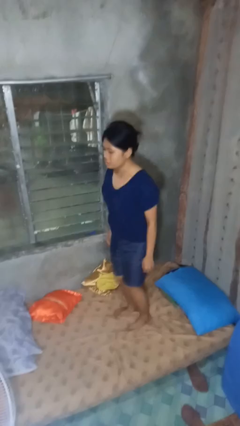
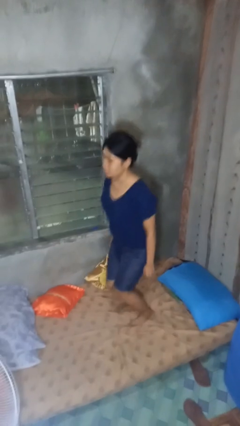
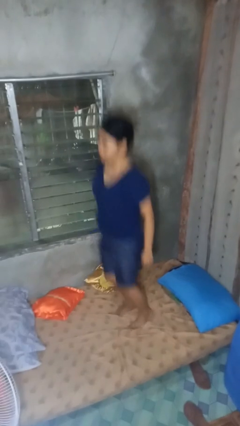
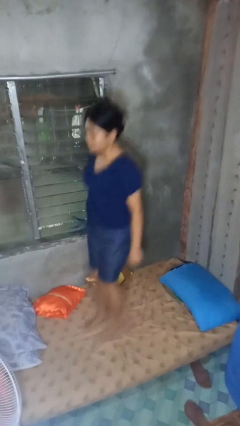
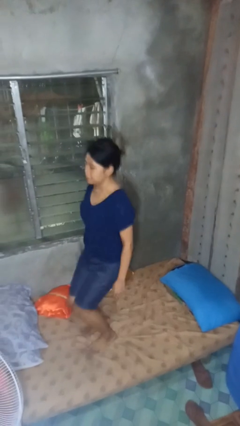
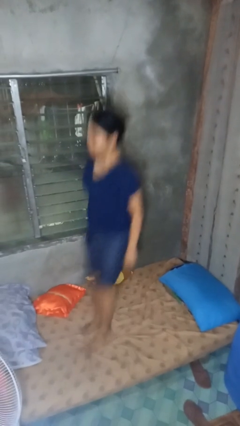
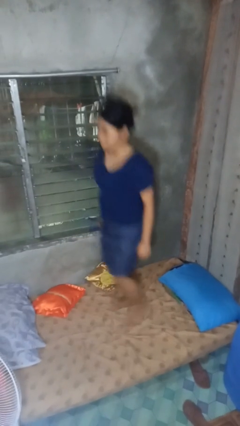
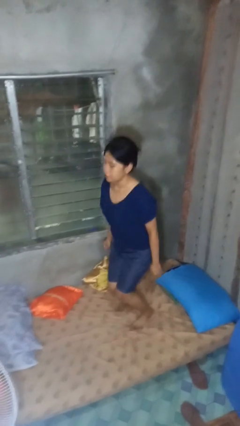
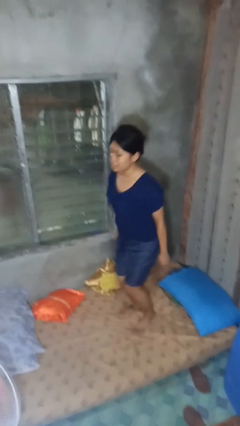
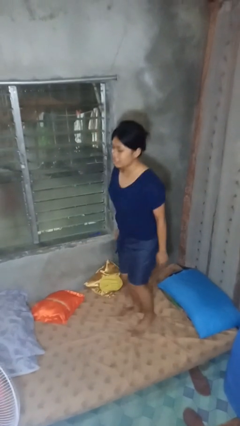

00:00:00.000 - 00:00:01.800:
person jumps on bed

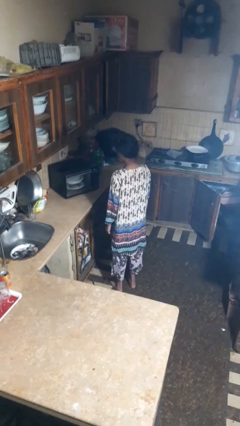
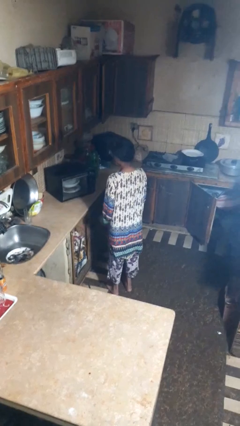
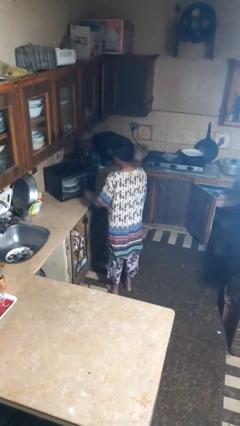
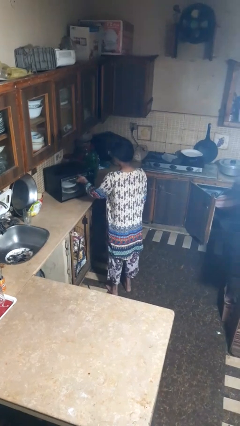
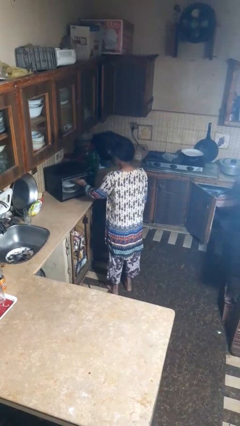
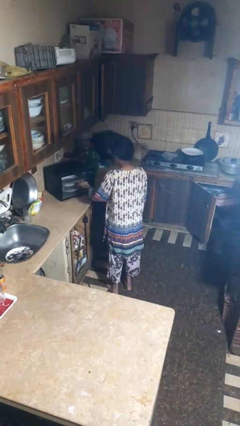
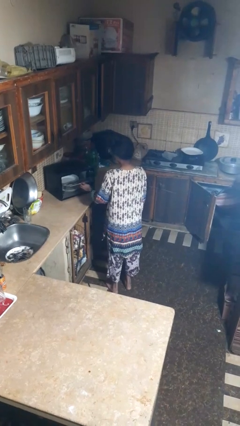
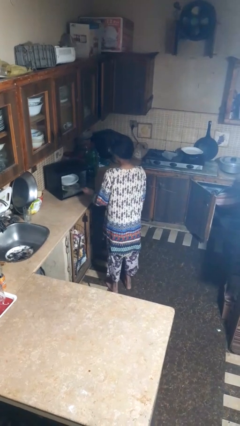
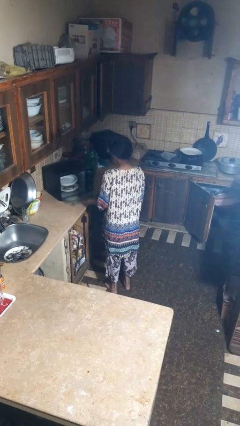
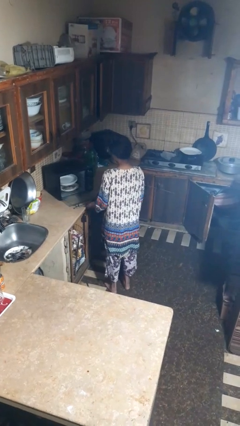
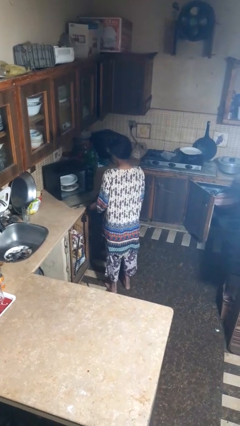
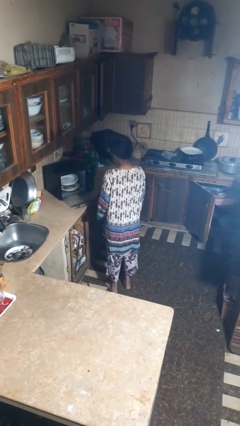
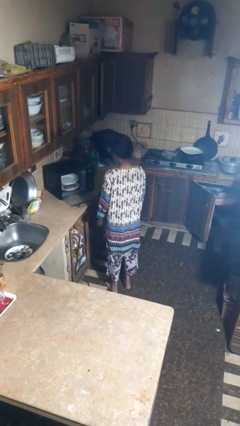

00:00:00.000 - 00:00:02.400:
person opens dishwasher

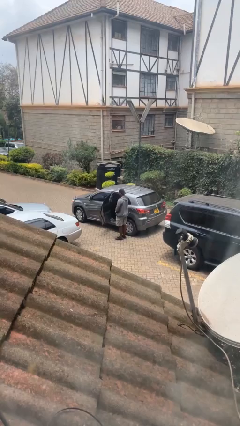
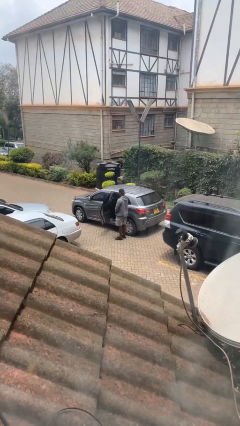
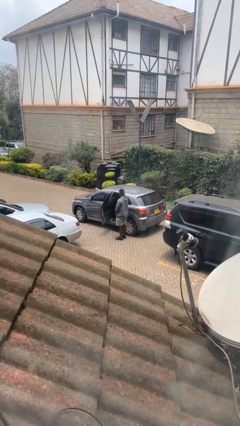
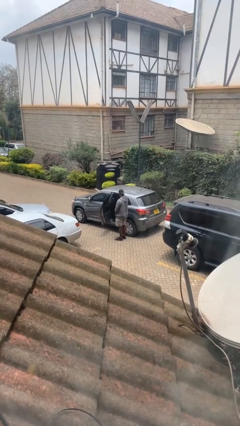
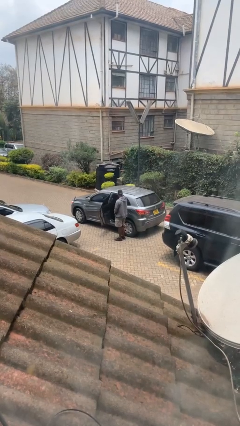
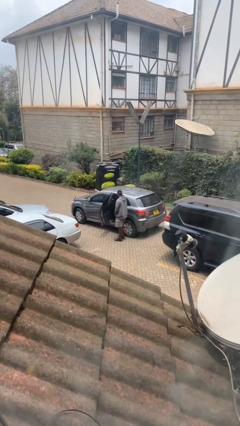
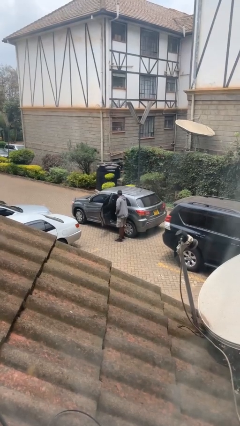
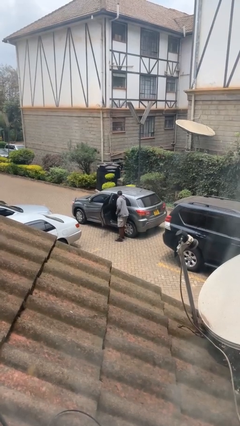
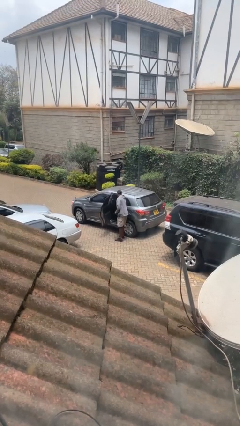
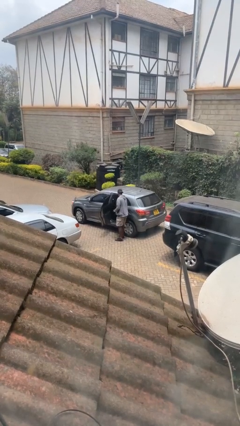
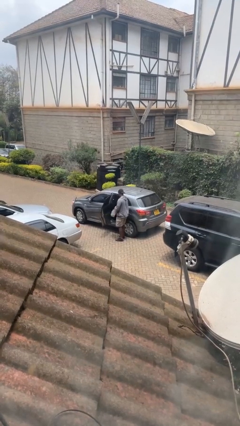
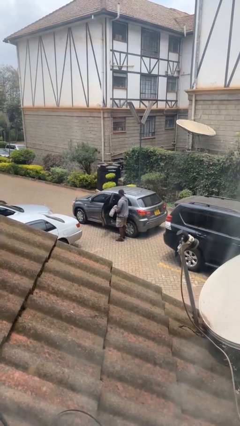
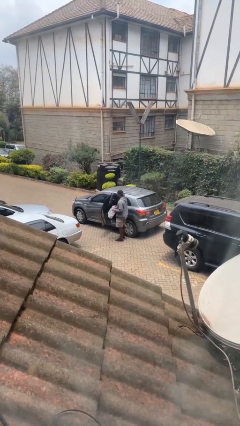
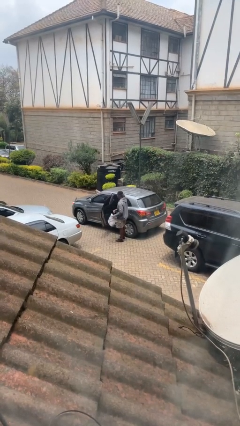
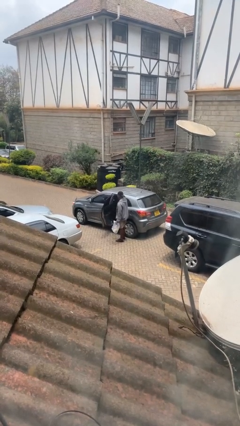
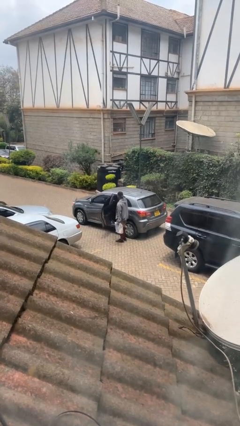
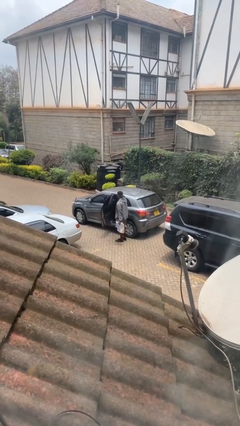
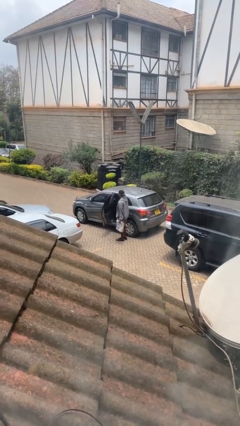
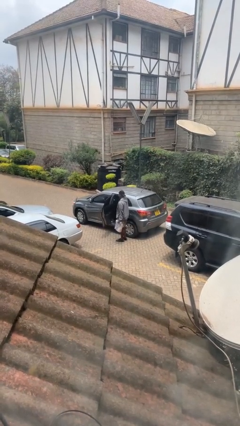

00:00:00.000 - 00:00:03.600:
person unloads car

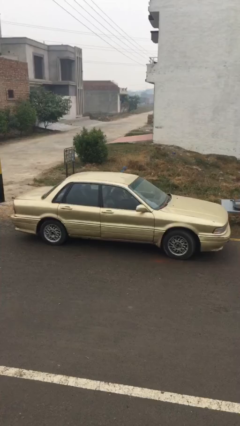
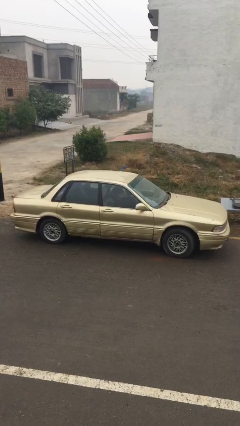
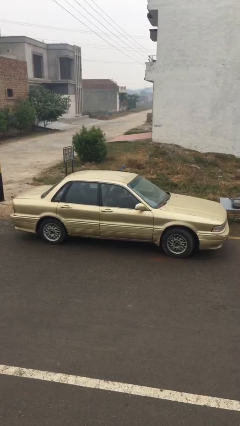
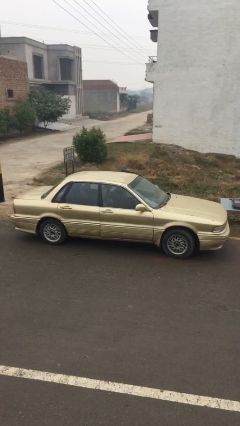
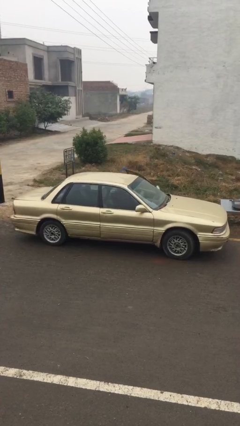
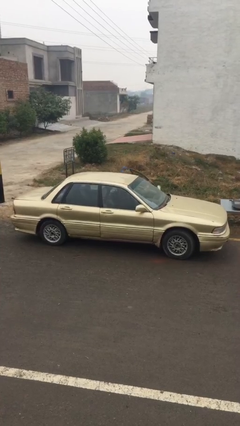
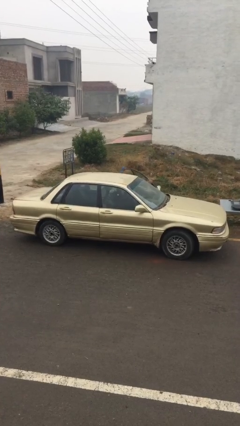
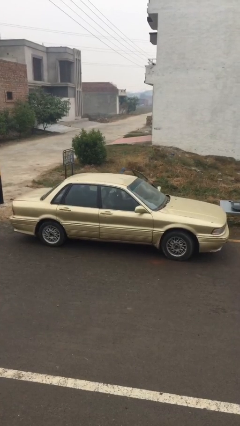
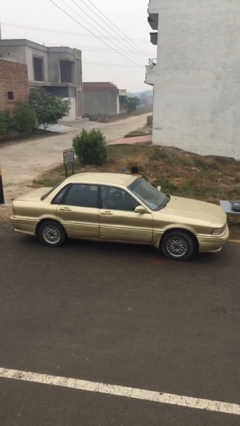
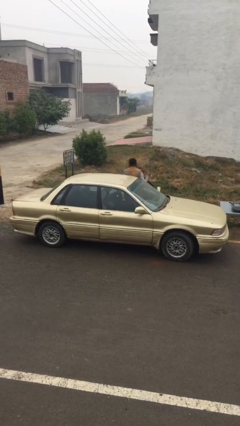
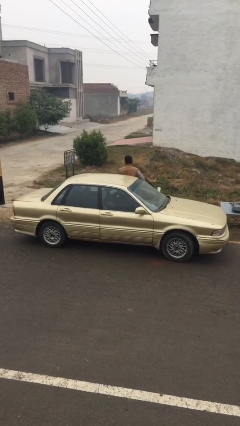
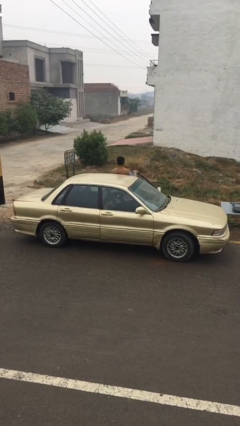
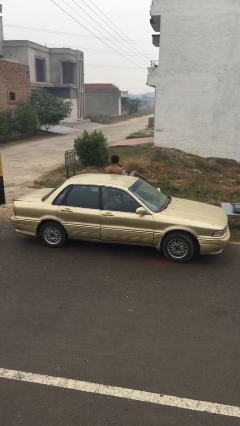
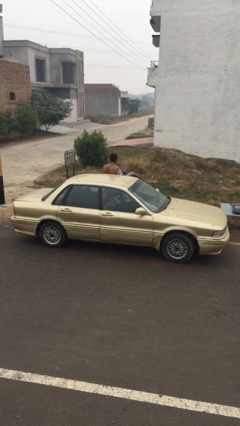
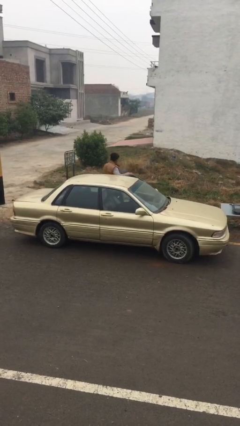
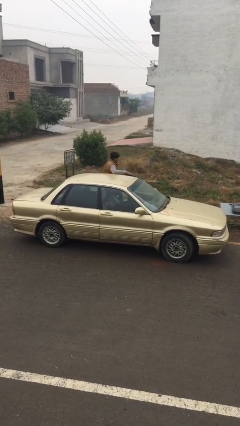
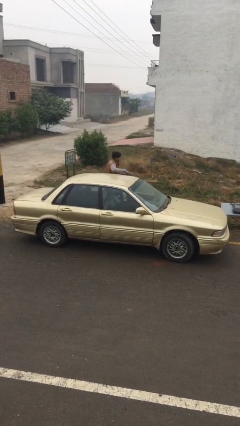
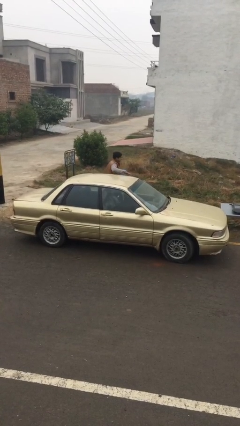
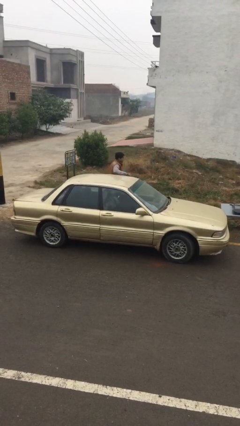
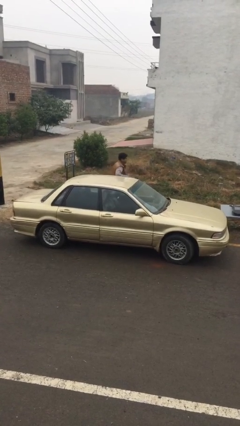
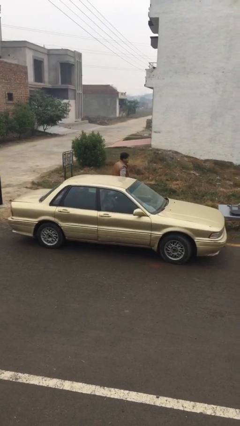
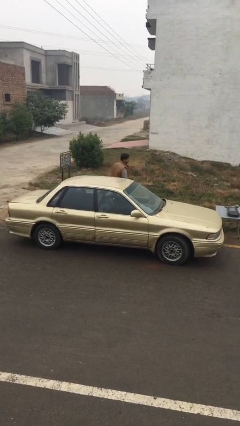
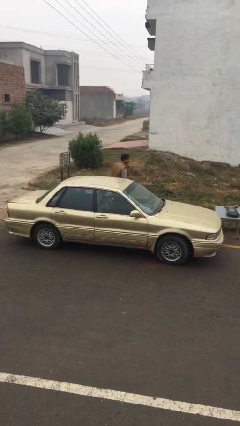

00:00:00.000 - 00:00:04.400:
car drops off person

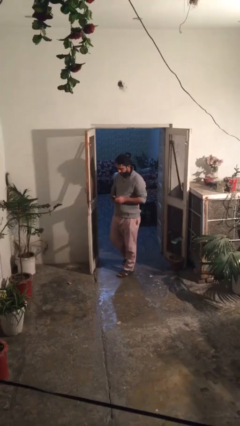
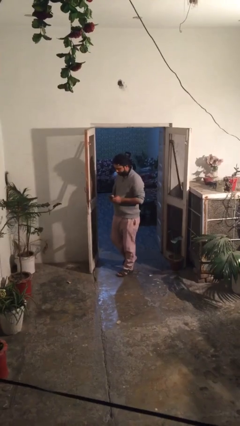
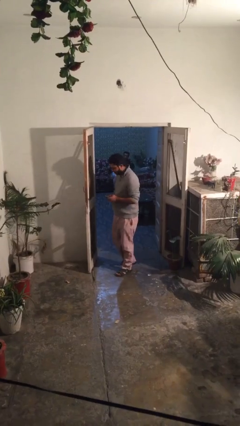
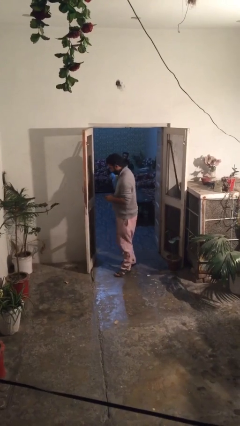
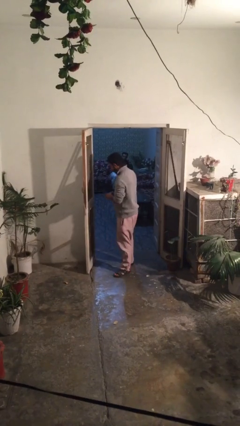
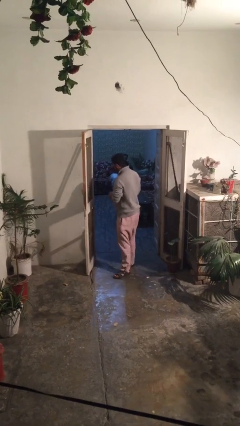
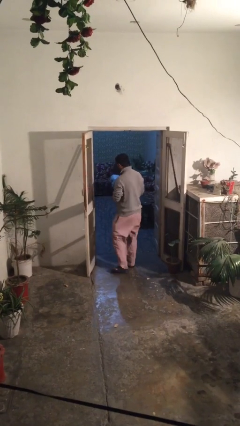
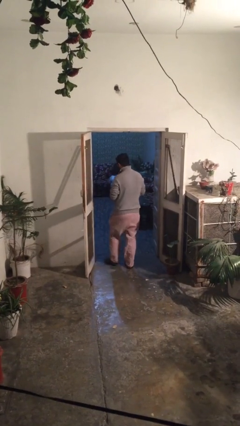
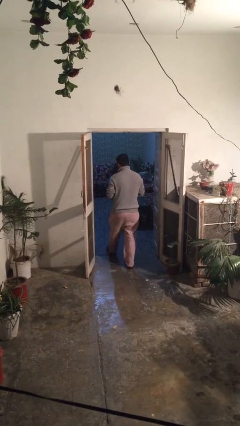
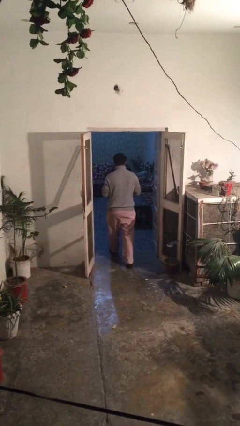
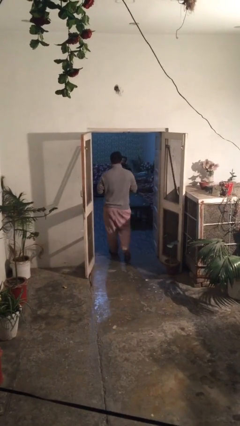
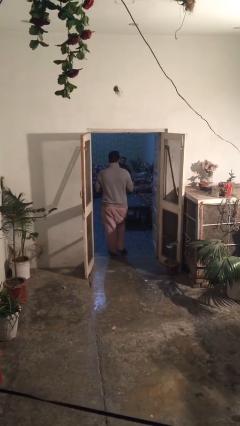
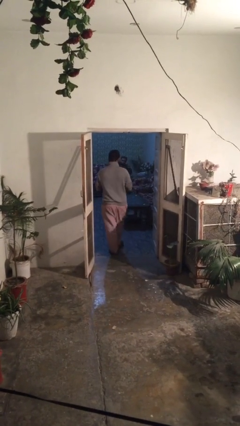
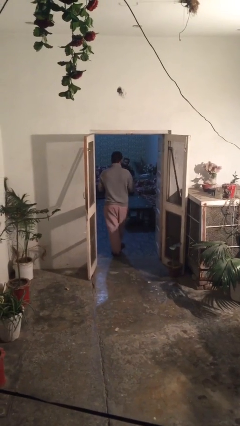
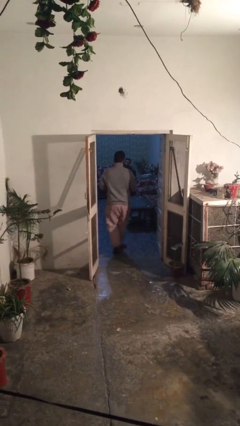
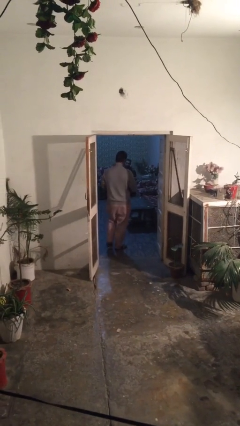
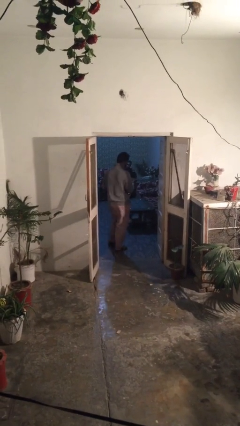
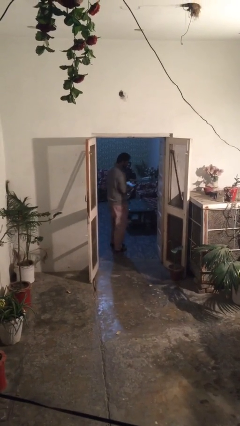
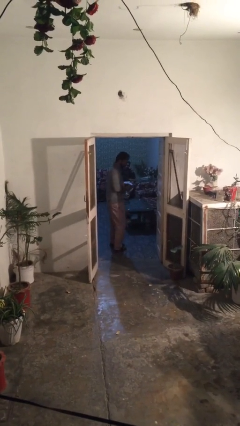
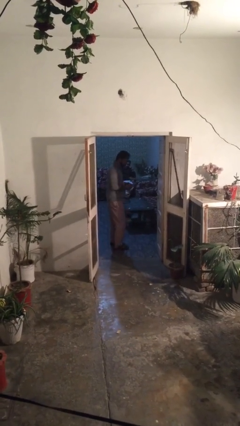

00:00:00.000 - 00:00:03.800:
person exits scene through structure

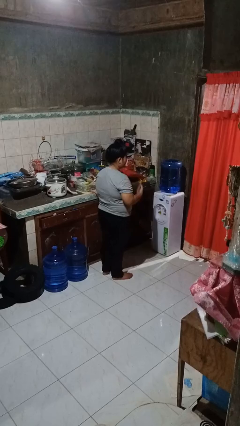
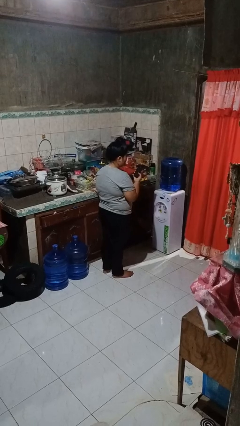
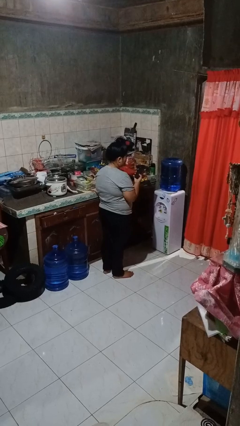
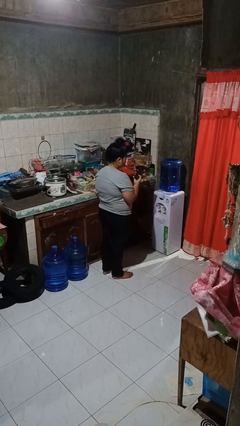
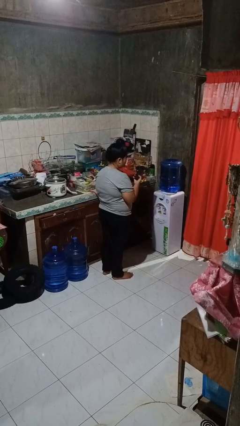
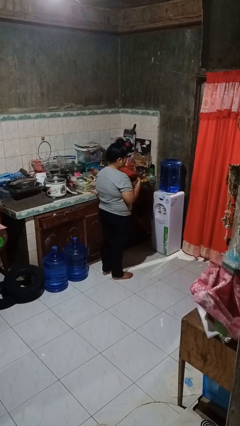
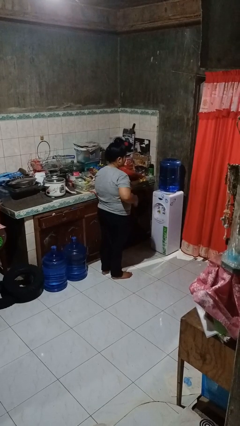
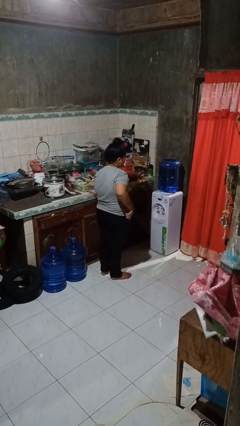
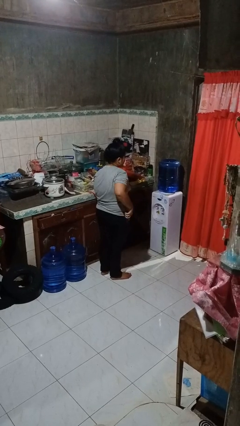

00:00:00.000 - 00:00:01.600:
person takes phone from pocket
